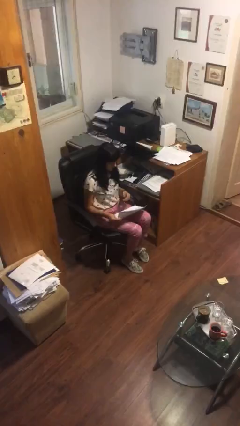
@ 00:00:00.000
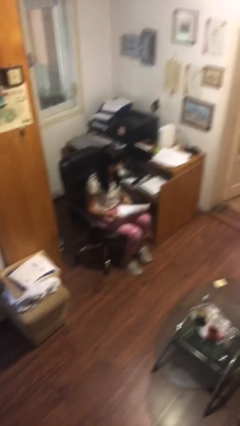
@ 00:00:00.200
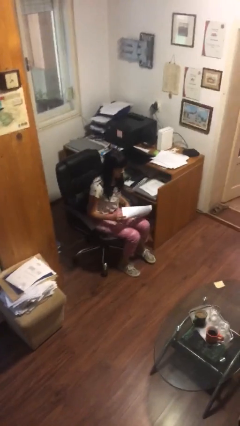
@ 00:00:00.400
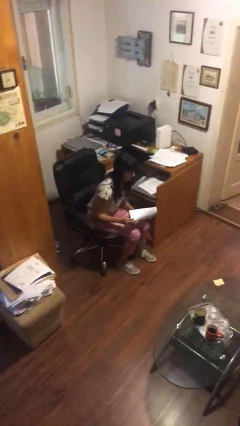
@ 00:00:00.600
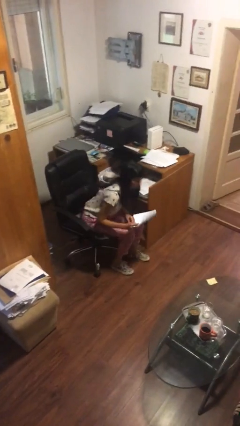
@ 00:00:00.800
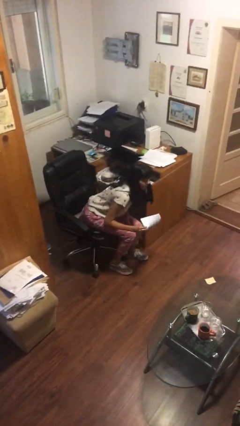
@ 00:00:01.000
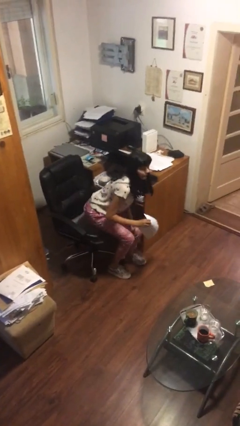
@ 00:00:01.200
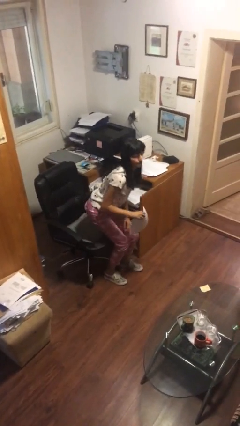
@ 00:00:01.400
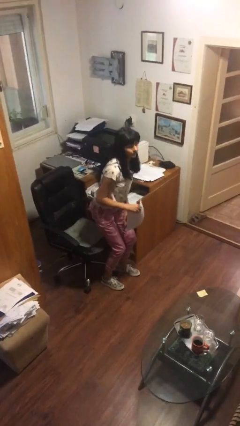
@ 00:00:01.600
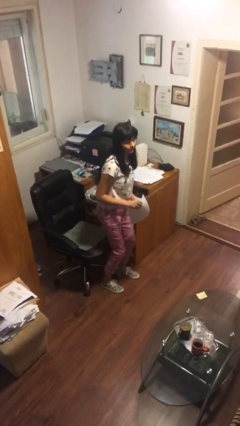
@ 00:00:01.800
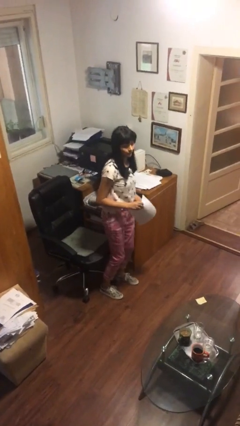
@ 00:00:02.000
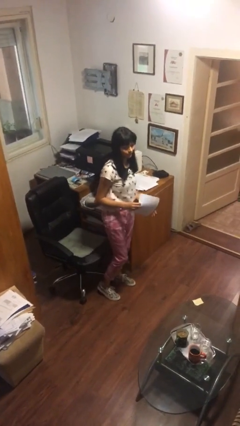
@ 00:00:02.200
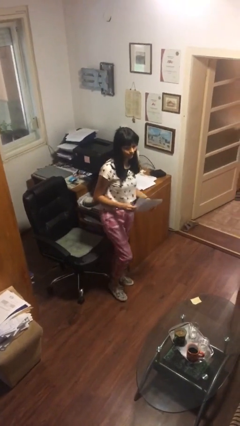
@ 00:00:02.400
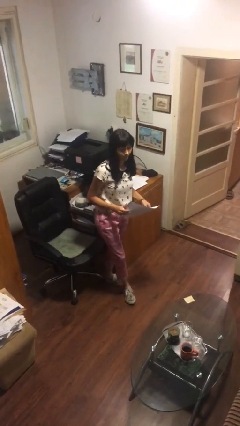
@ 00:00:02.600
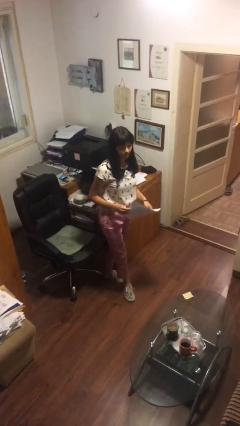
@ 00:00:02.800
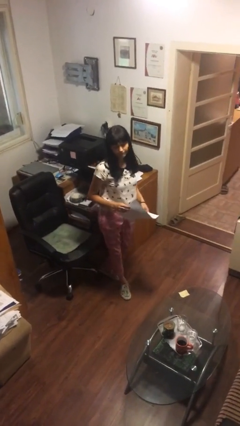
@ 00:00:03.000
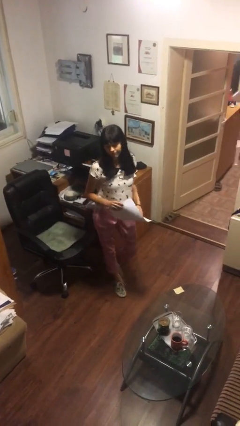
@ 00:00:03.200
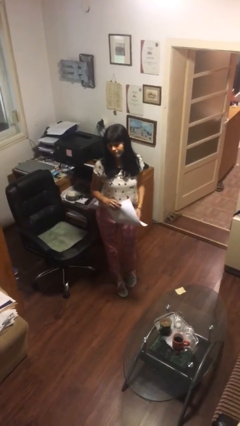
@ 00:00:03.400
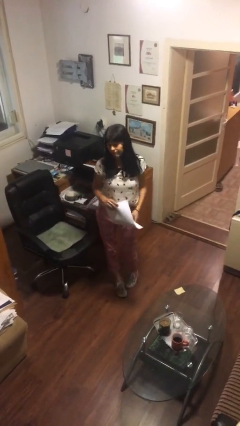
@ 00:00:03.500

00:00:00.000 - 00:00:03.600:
person stands up

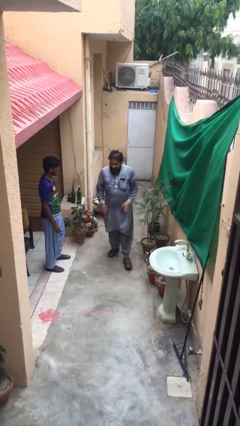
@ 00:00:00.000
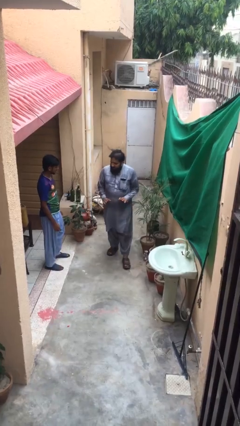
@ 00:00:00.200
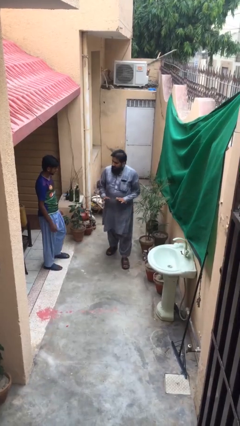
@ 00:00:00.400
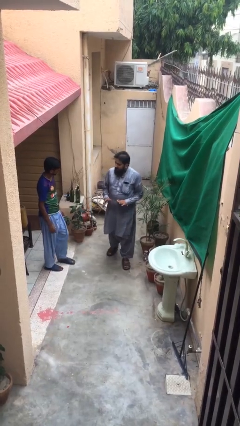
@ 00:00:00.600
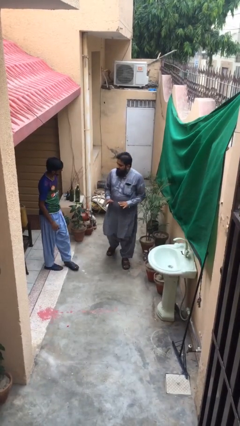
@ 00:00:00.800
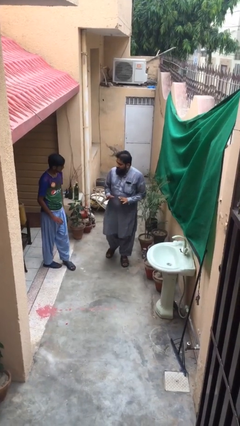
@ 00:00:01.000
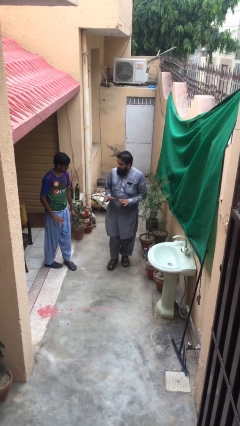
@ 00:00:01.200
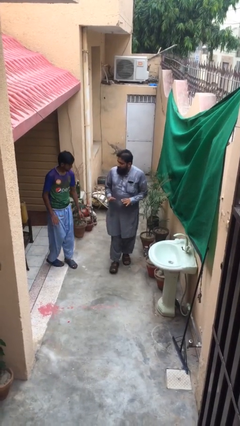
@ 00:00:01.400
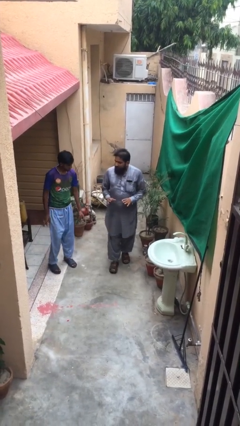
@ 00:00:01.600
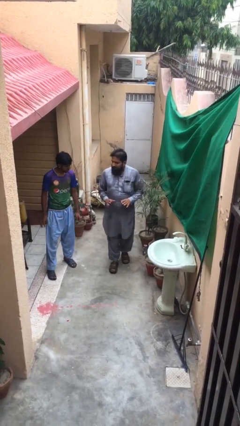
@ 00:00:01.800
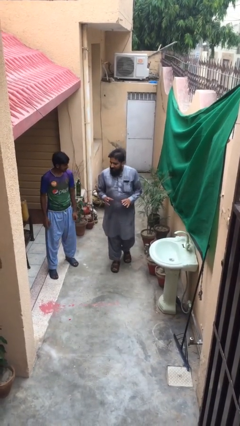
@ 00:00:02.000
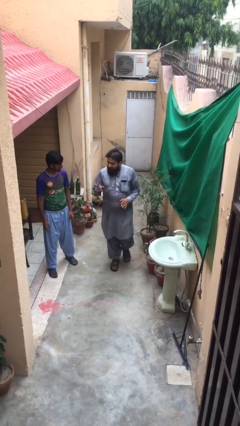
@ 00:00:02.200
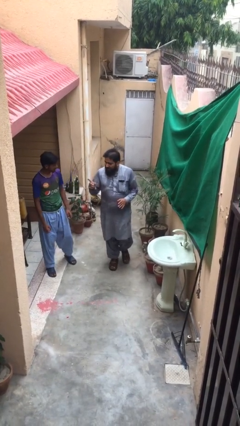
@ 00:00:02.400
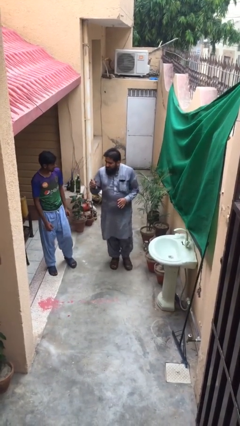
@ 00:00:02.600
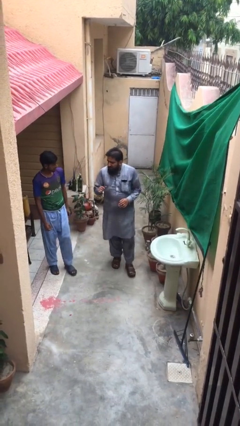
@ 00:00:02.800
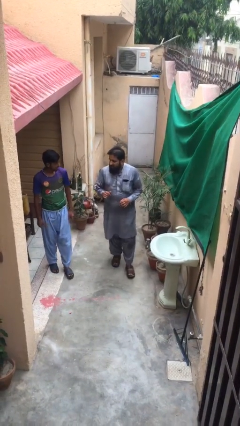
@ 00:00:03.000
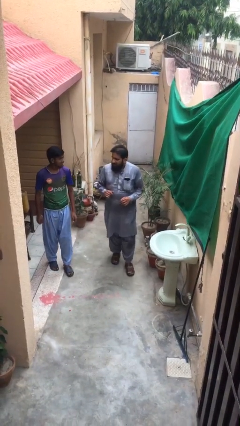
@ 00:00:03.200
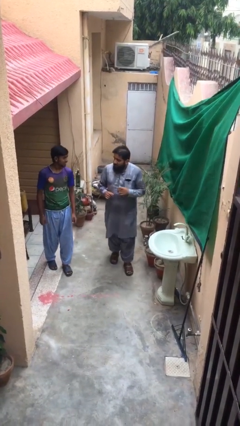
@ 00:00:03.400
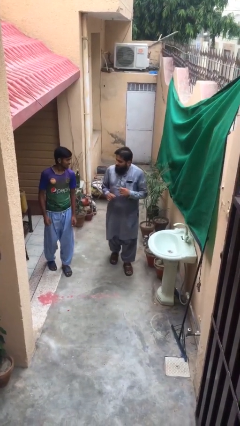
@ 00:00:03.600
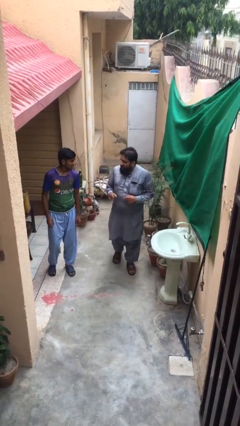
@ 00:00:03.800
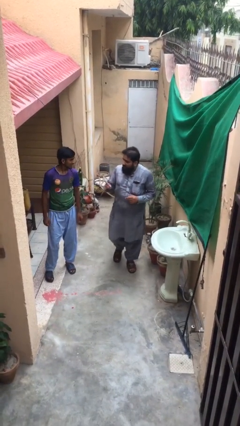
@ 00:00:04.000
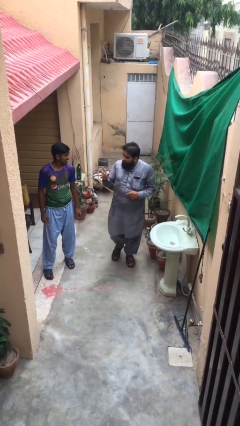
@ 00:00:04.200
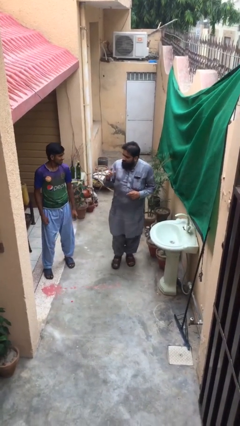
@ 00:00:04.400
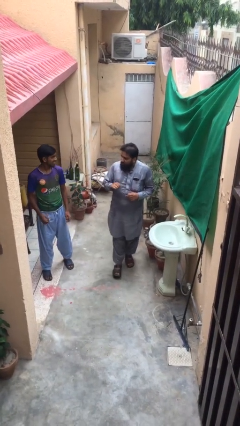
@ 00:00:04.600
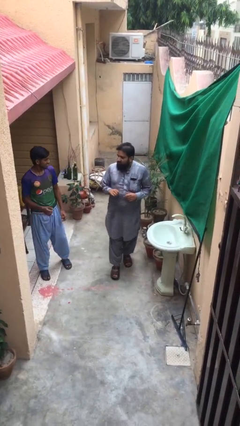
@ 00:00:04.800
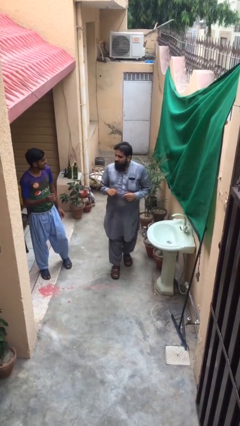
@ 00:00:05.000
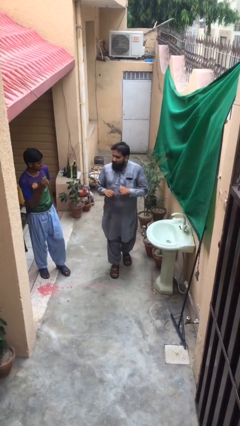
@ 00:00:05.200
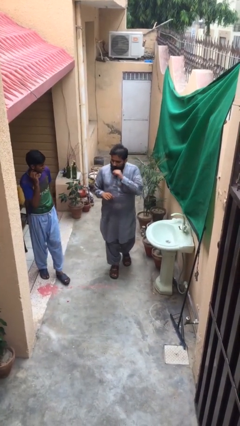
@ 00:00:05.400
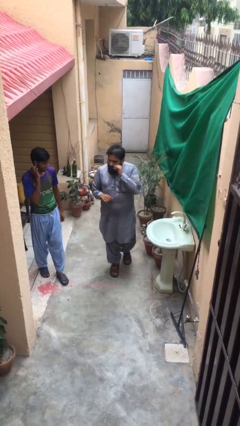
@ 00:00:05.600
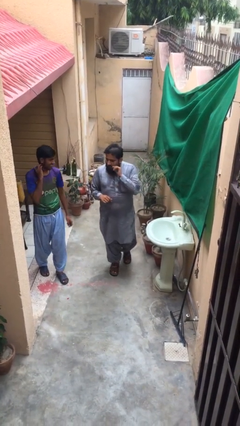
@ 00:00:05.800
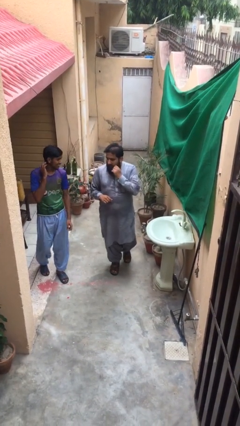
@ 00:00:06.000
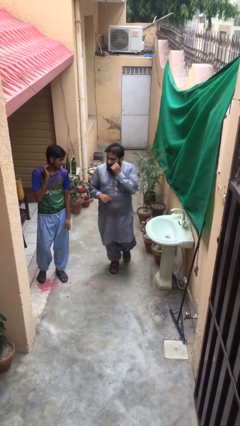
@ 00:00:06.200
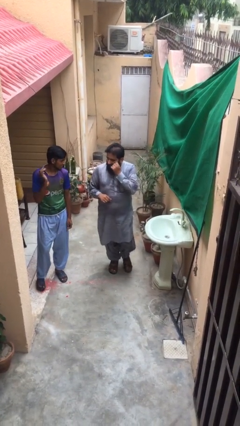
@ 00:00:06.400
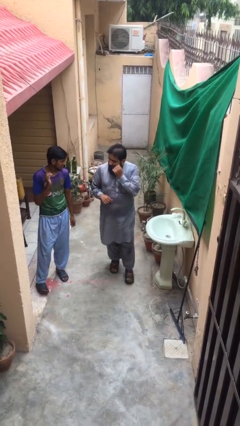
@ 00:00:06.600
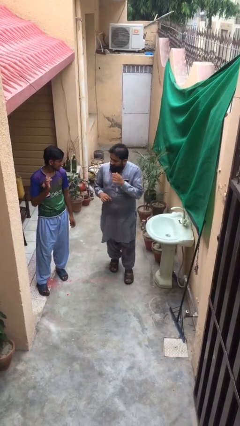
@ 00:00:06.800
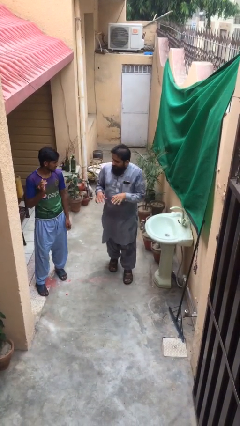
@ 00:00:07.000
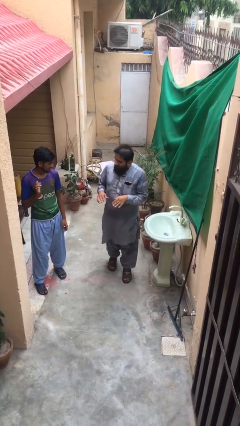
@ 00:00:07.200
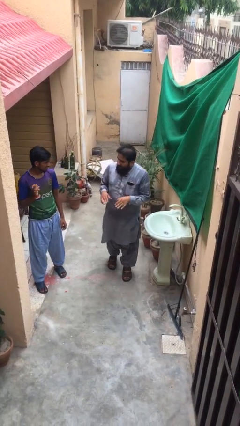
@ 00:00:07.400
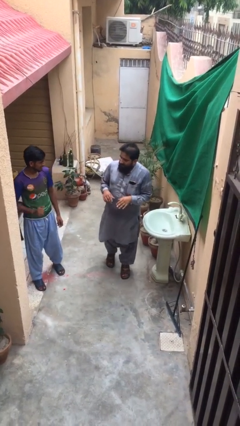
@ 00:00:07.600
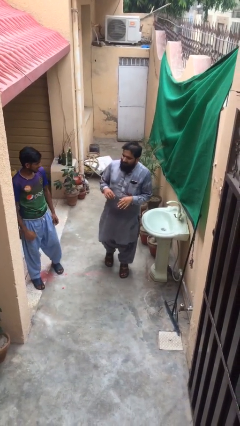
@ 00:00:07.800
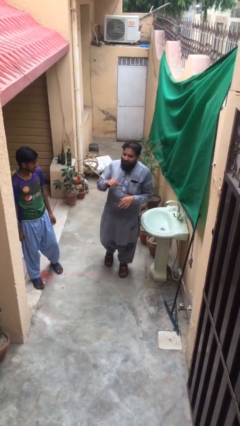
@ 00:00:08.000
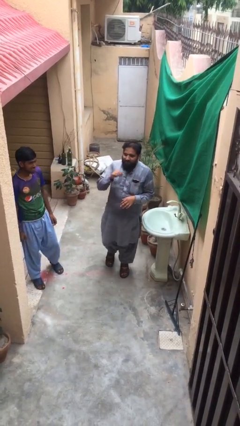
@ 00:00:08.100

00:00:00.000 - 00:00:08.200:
person talks to person

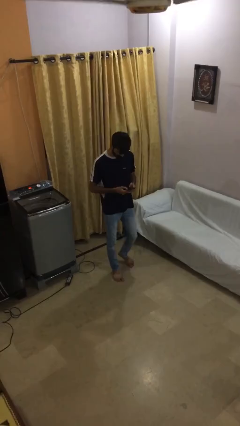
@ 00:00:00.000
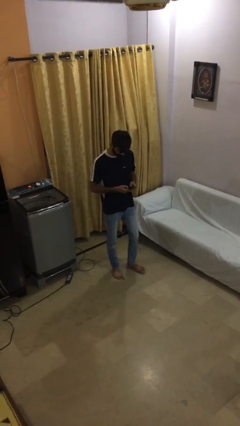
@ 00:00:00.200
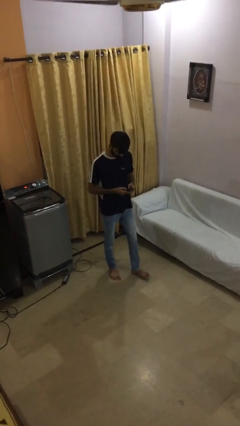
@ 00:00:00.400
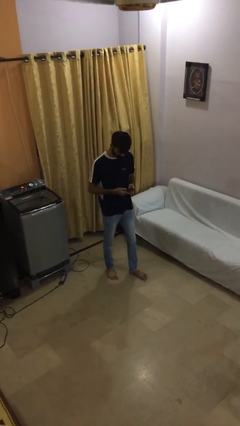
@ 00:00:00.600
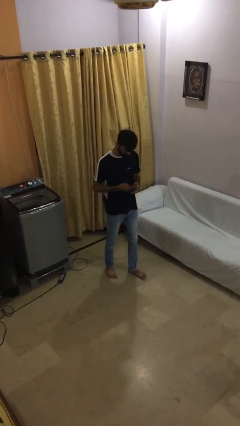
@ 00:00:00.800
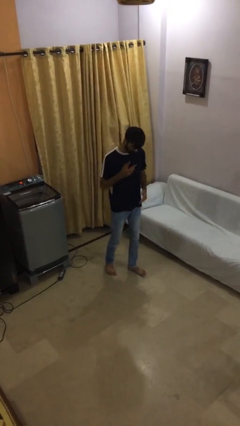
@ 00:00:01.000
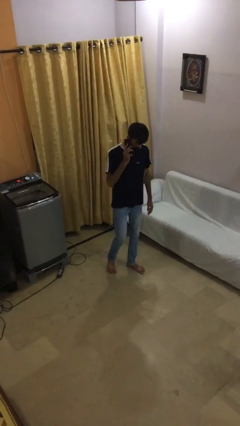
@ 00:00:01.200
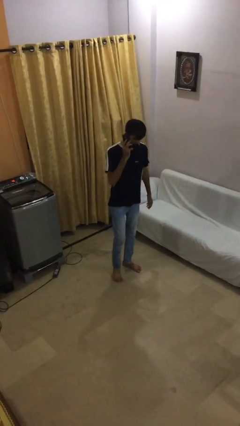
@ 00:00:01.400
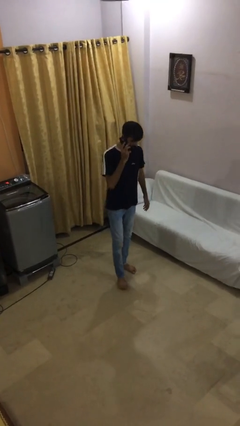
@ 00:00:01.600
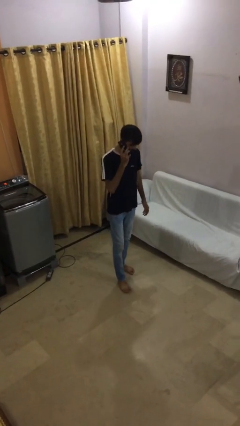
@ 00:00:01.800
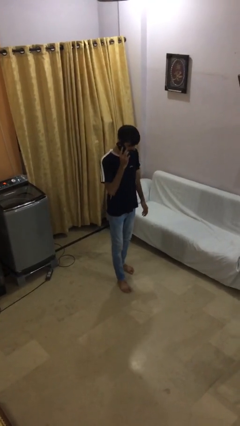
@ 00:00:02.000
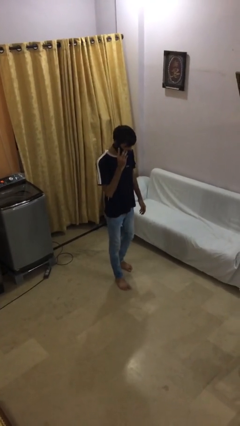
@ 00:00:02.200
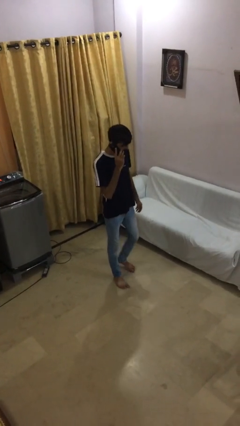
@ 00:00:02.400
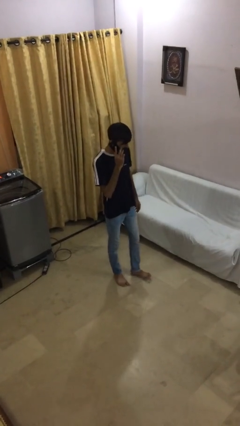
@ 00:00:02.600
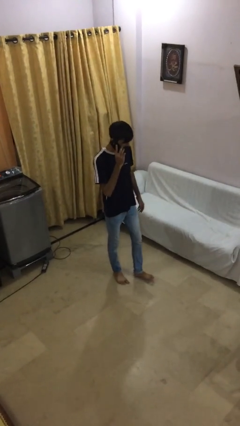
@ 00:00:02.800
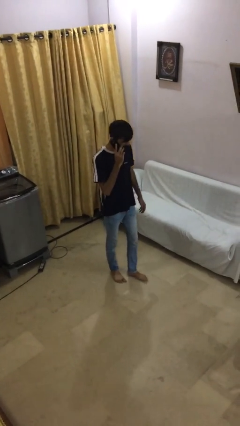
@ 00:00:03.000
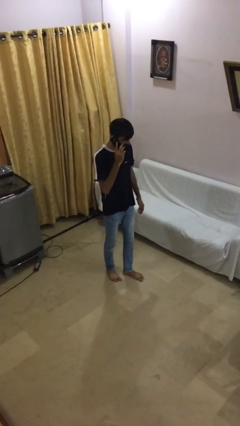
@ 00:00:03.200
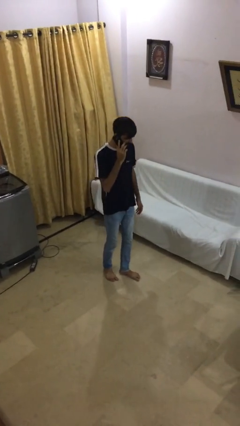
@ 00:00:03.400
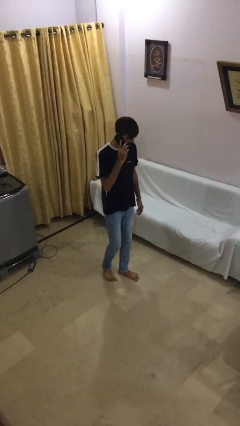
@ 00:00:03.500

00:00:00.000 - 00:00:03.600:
person talks on phone

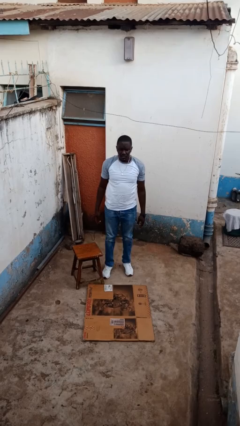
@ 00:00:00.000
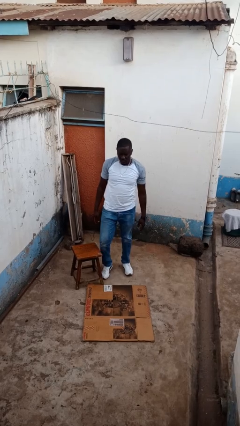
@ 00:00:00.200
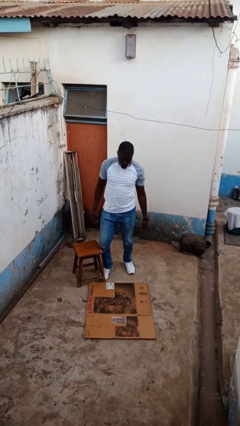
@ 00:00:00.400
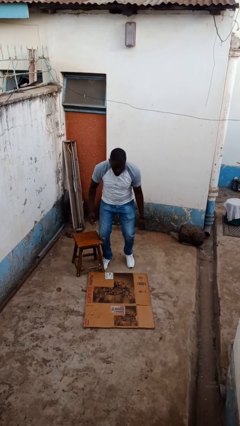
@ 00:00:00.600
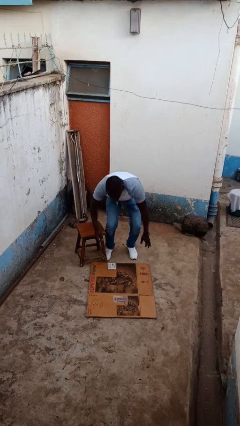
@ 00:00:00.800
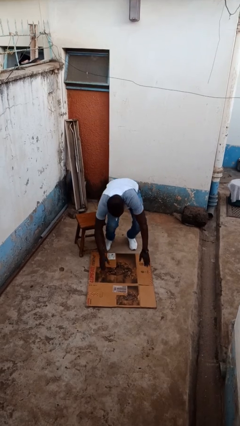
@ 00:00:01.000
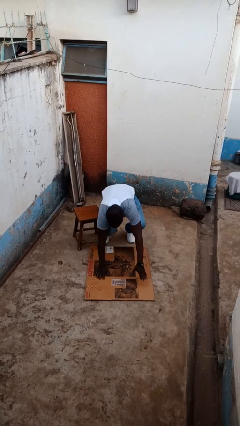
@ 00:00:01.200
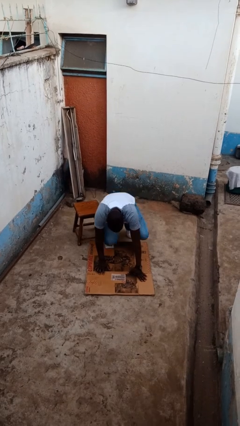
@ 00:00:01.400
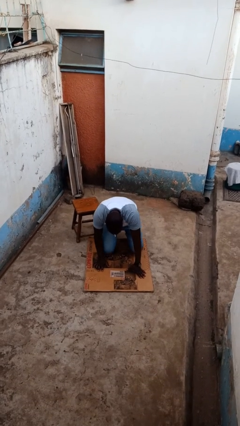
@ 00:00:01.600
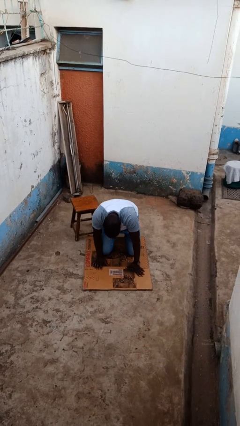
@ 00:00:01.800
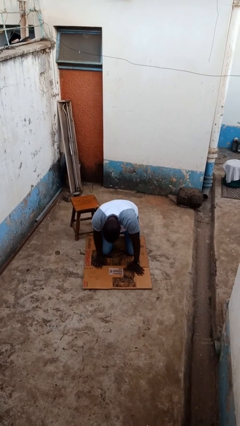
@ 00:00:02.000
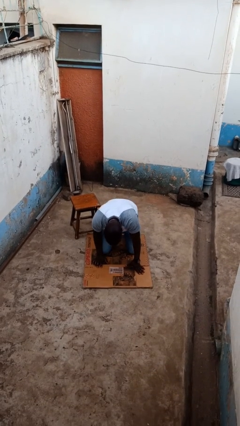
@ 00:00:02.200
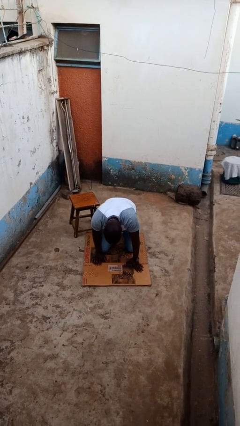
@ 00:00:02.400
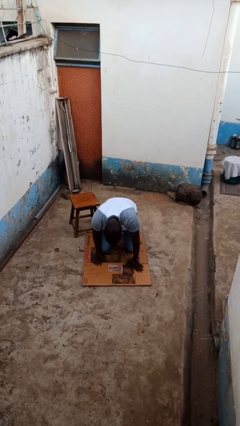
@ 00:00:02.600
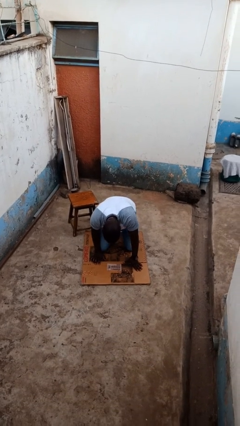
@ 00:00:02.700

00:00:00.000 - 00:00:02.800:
person trips on object on floor
